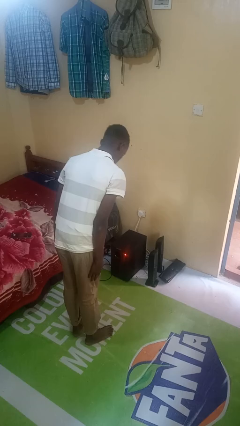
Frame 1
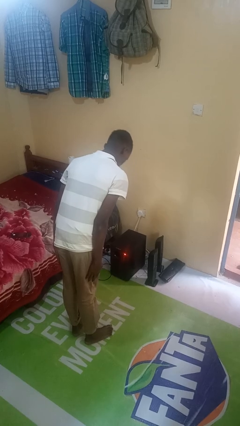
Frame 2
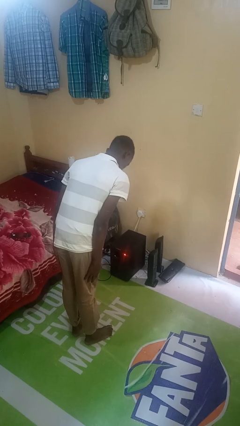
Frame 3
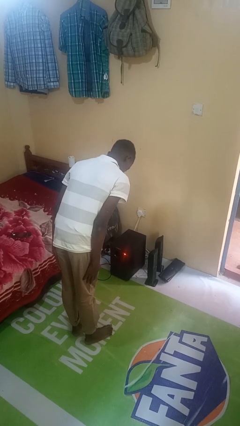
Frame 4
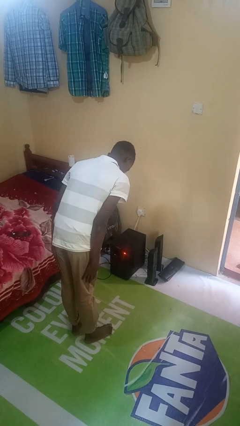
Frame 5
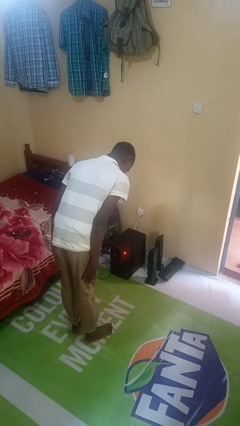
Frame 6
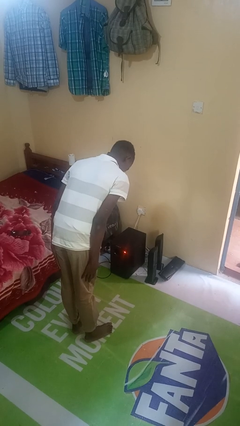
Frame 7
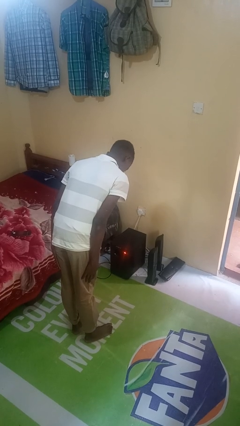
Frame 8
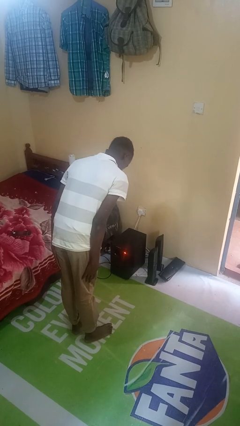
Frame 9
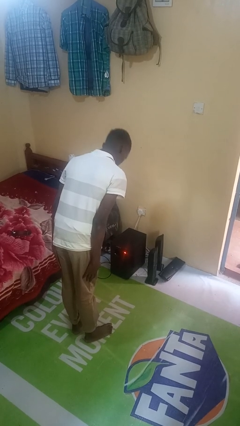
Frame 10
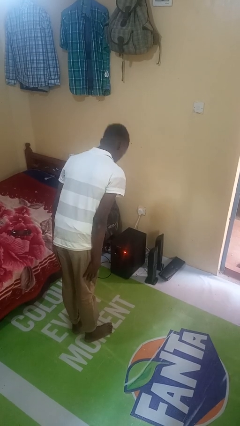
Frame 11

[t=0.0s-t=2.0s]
person bows

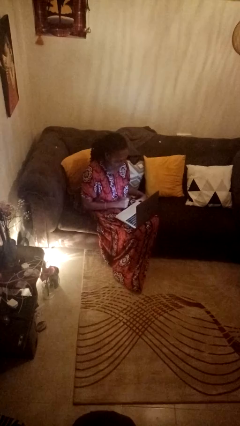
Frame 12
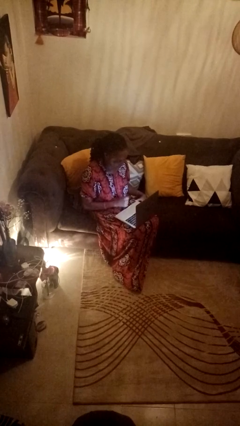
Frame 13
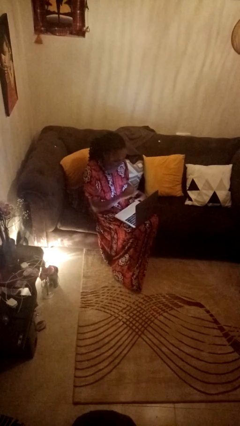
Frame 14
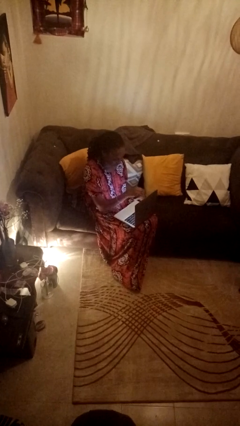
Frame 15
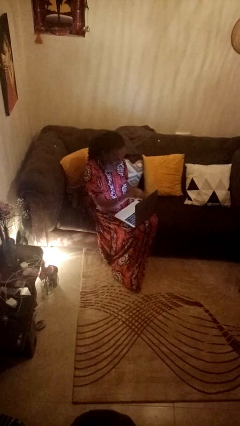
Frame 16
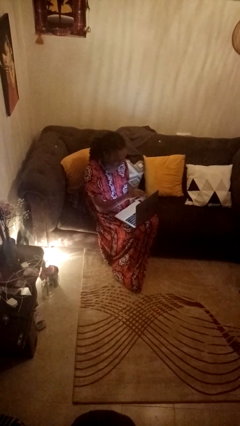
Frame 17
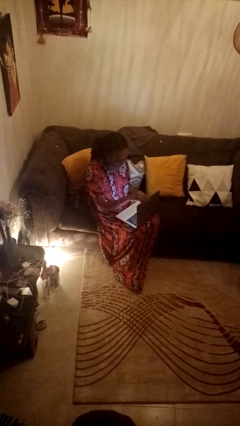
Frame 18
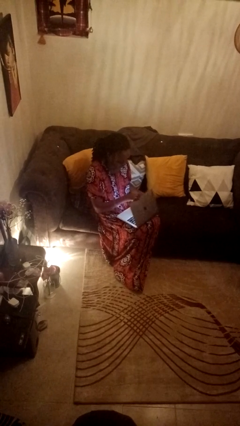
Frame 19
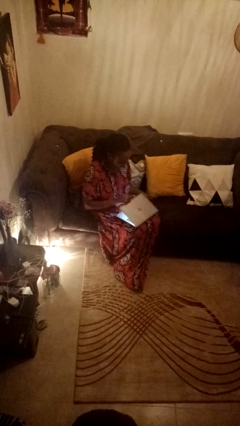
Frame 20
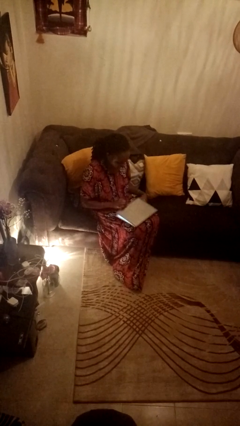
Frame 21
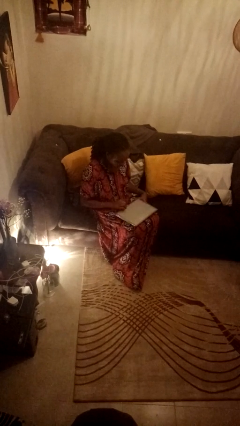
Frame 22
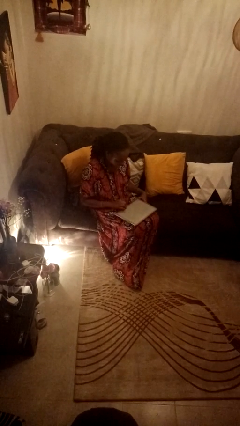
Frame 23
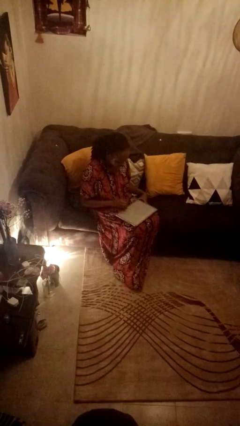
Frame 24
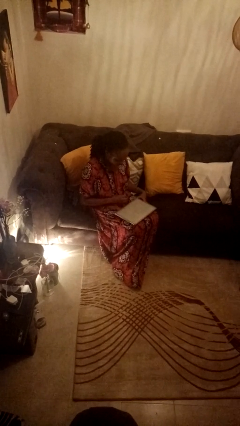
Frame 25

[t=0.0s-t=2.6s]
person closes laptop

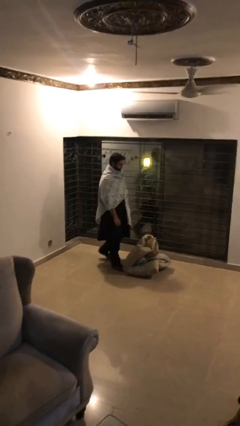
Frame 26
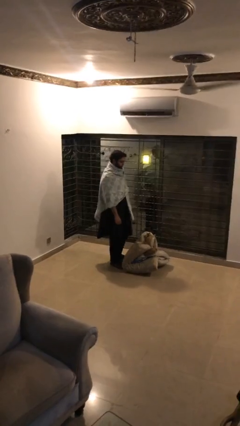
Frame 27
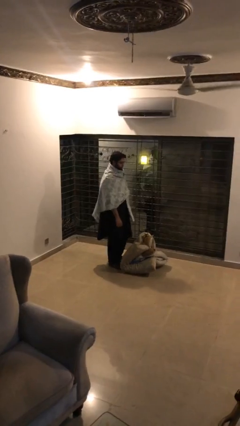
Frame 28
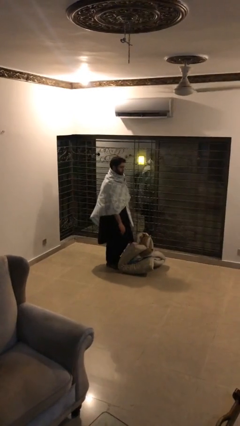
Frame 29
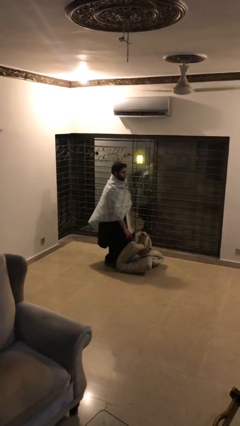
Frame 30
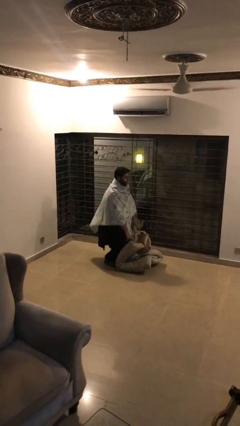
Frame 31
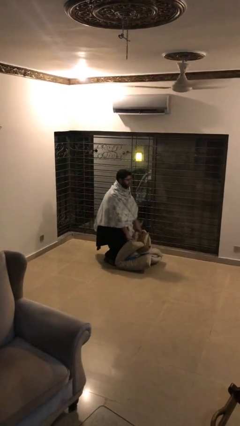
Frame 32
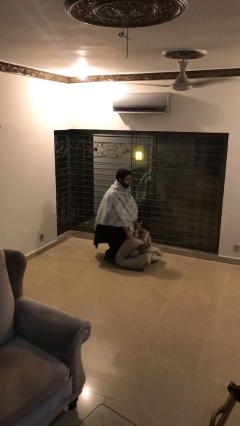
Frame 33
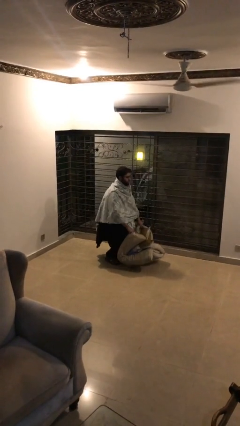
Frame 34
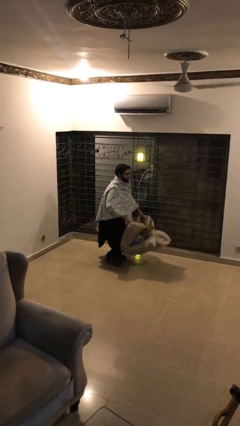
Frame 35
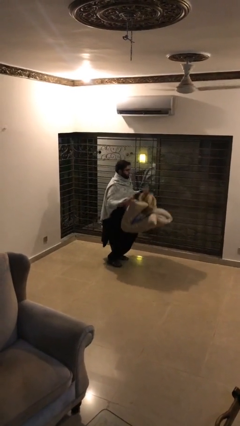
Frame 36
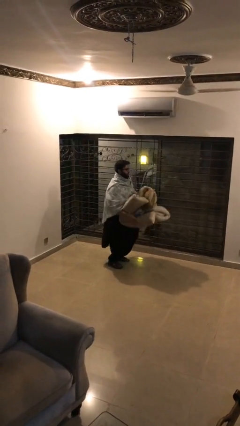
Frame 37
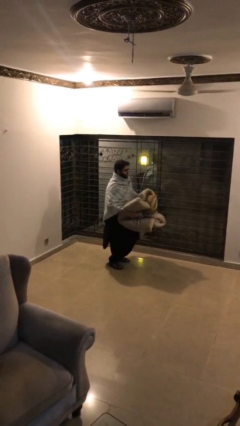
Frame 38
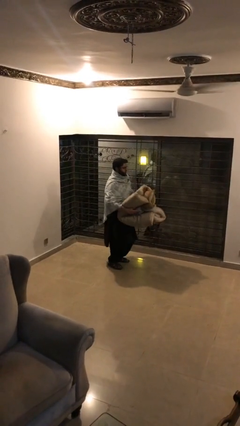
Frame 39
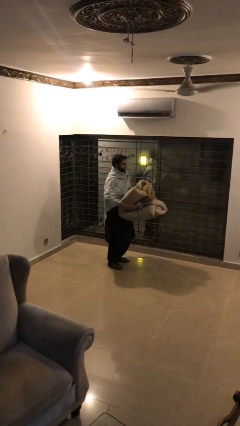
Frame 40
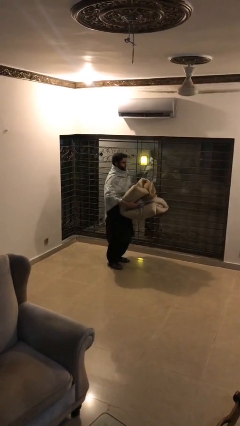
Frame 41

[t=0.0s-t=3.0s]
person picks up object from floor

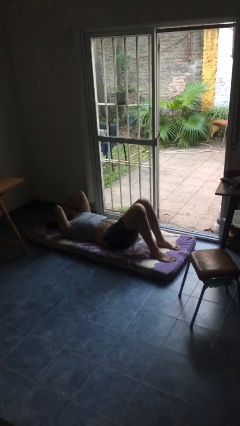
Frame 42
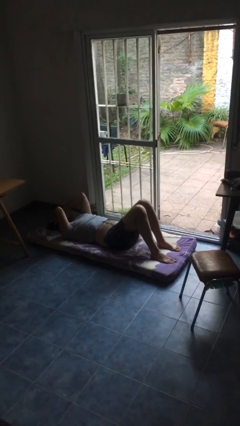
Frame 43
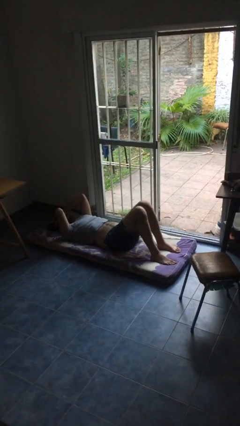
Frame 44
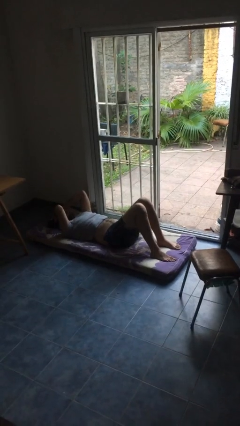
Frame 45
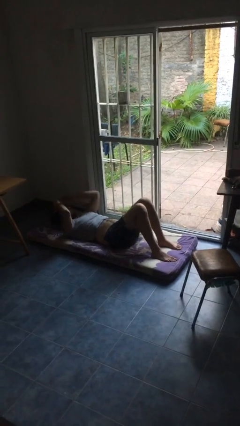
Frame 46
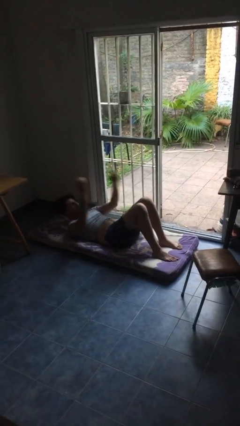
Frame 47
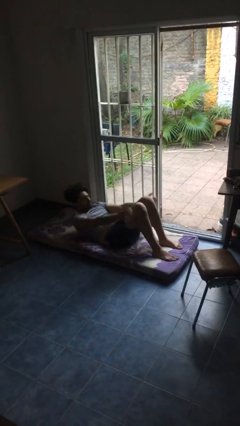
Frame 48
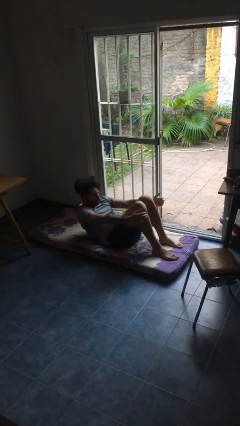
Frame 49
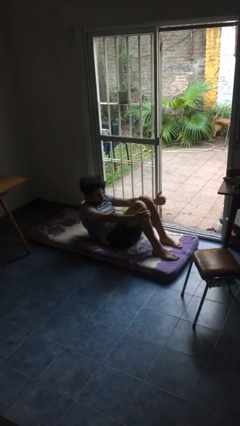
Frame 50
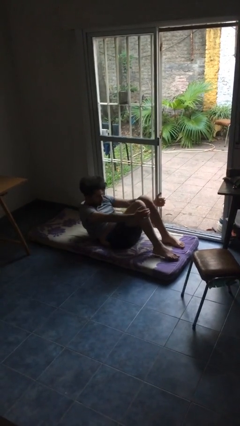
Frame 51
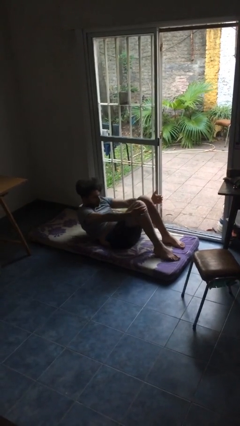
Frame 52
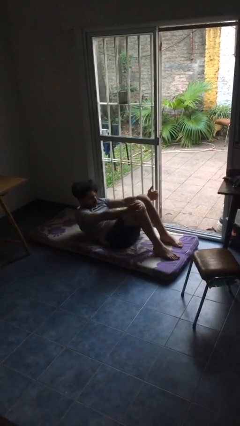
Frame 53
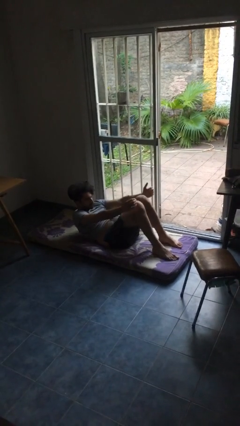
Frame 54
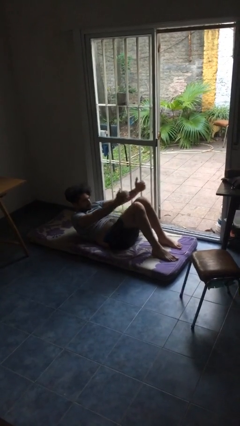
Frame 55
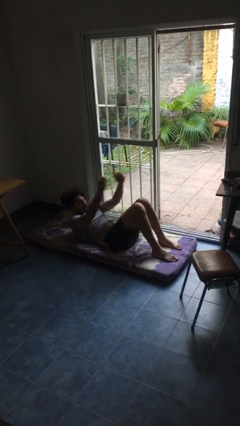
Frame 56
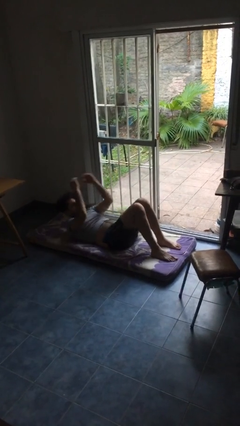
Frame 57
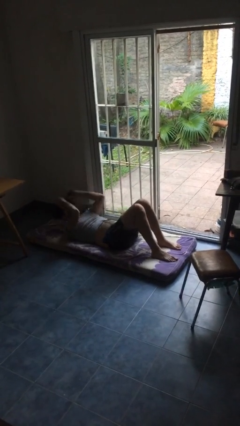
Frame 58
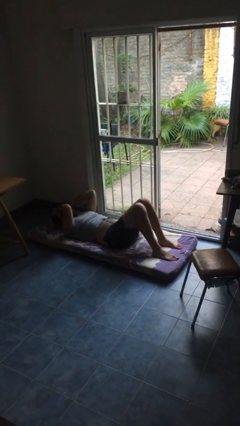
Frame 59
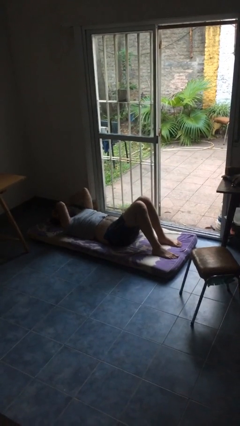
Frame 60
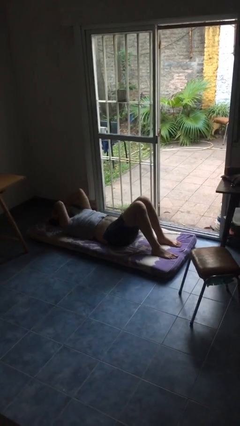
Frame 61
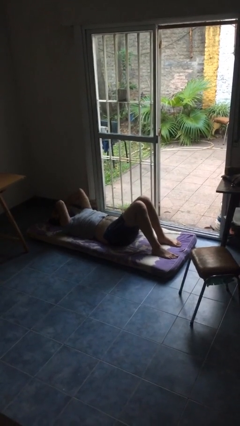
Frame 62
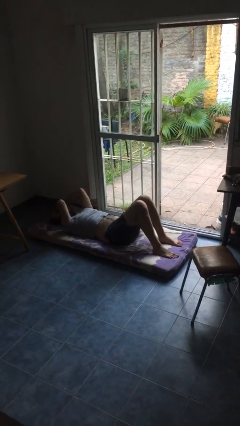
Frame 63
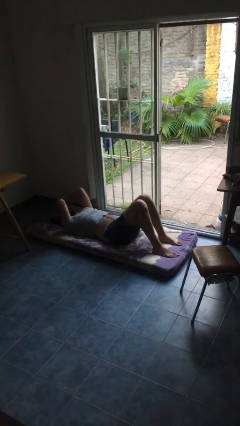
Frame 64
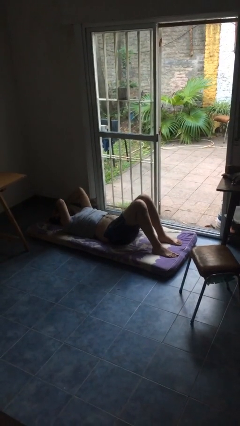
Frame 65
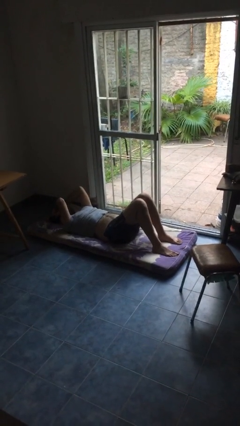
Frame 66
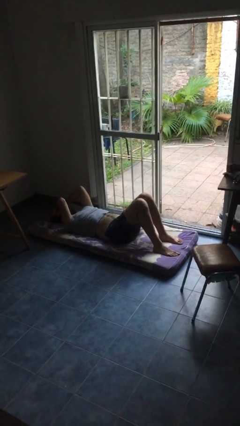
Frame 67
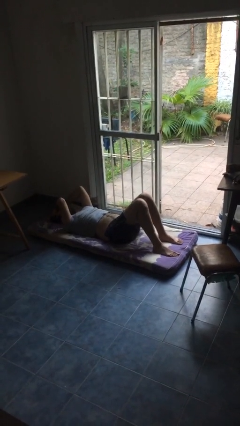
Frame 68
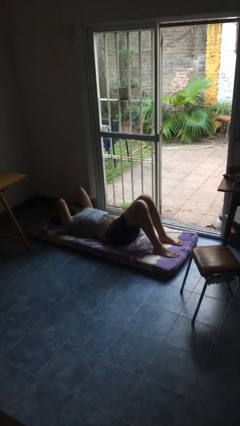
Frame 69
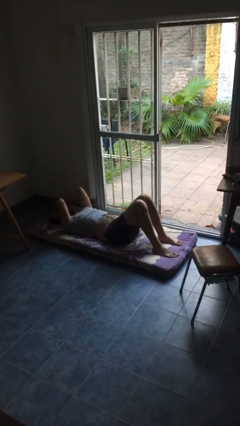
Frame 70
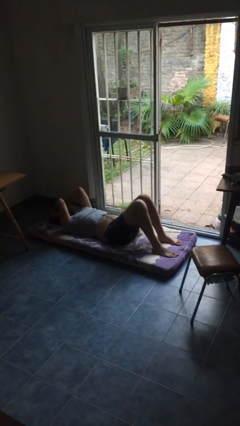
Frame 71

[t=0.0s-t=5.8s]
person exercises with situp

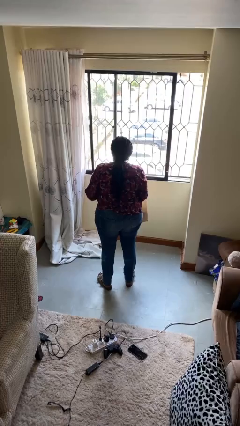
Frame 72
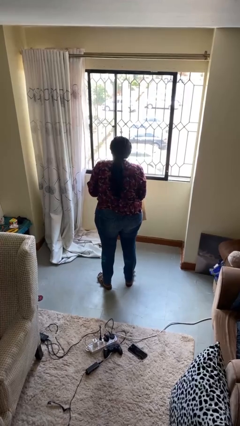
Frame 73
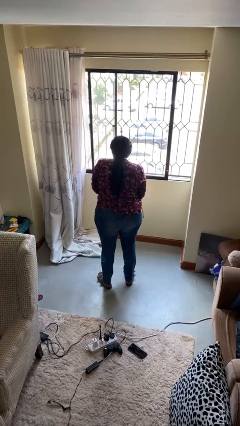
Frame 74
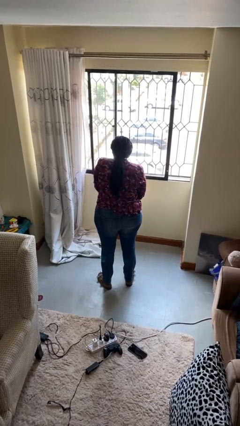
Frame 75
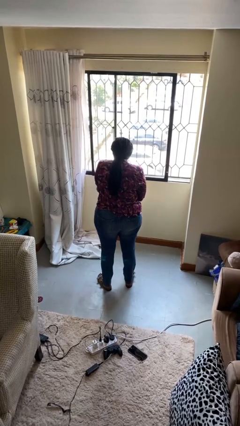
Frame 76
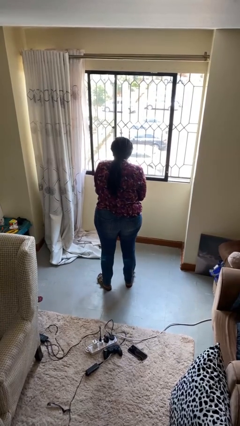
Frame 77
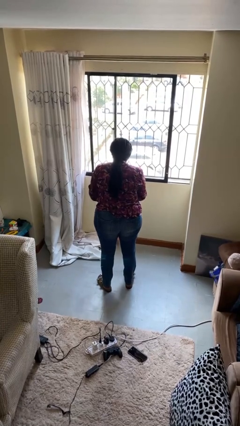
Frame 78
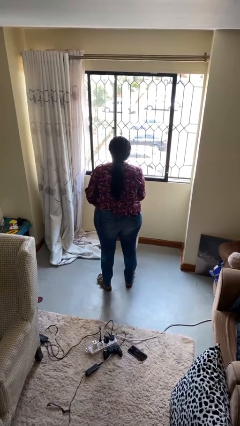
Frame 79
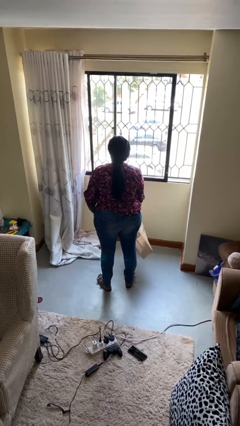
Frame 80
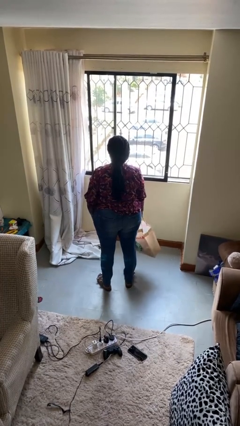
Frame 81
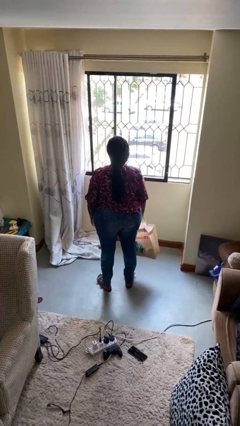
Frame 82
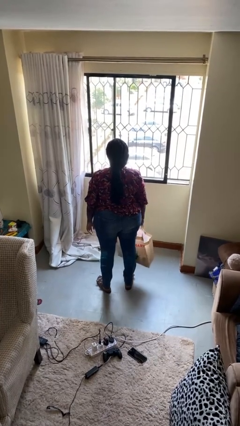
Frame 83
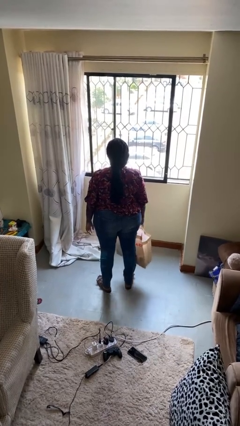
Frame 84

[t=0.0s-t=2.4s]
person puts object into bag

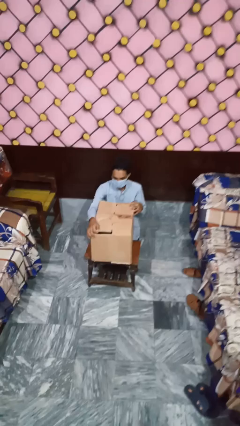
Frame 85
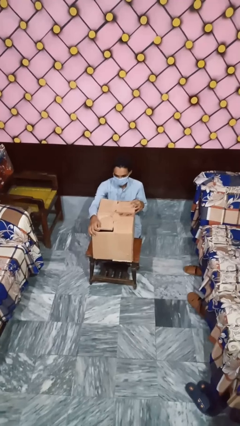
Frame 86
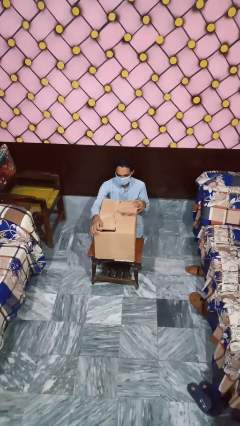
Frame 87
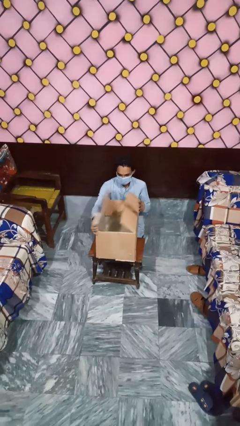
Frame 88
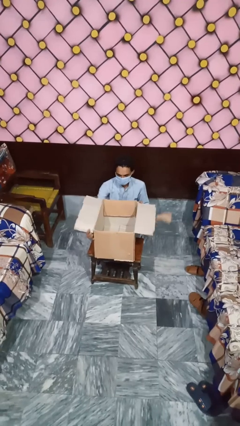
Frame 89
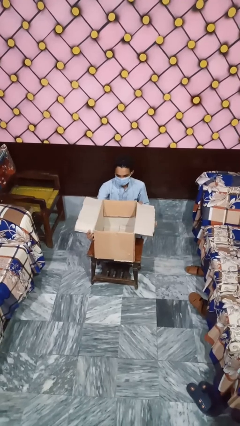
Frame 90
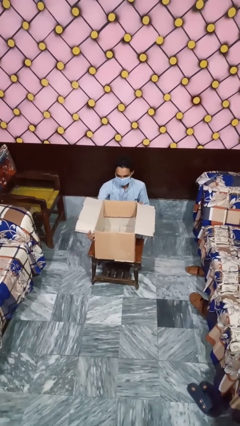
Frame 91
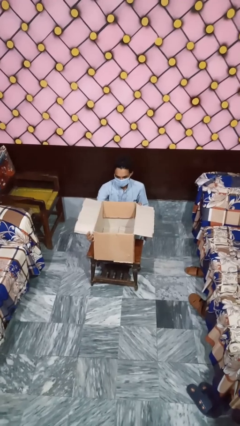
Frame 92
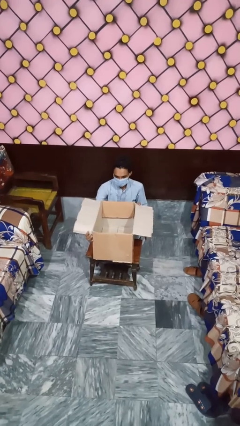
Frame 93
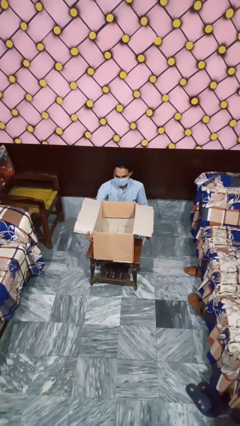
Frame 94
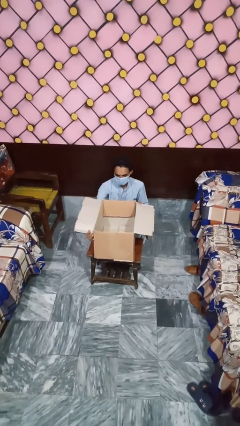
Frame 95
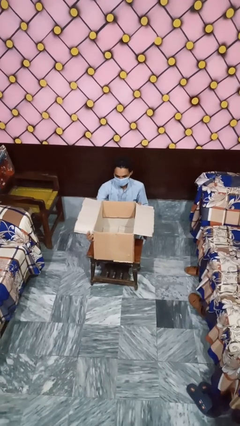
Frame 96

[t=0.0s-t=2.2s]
person opens box
